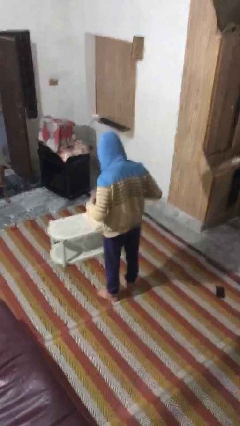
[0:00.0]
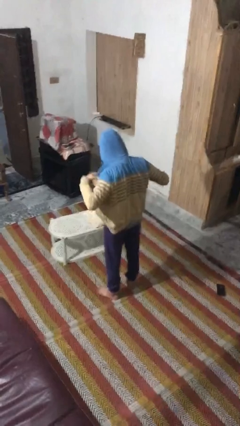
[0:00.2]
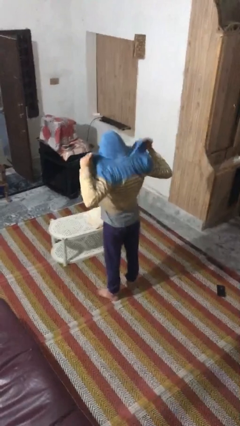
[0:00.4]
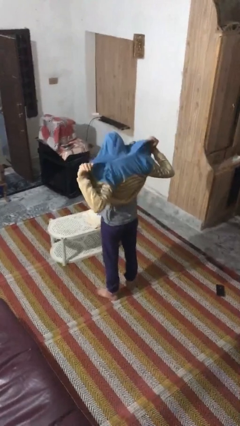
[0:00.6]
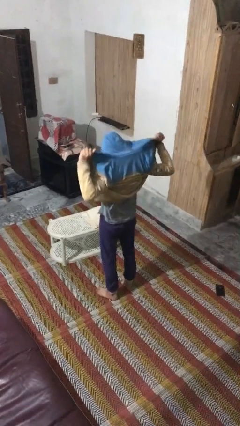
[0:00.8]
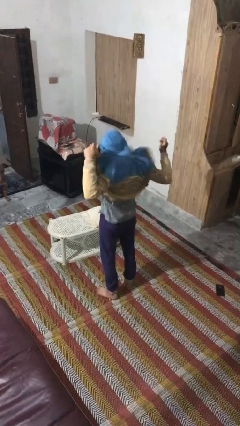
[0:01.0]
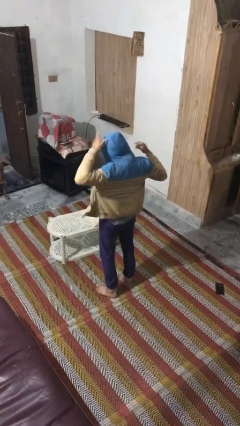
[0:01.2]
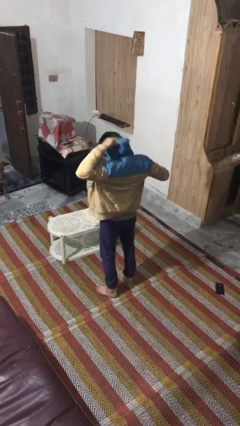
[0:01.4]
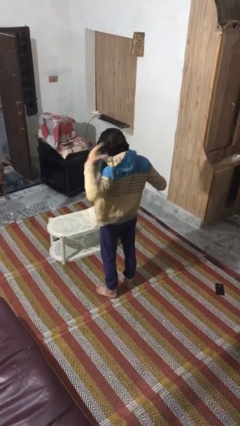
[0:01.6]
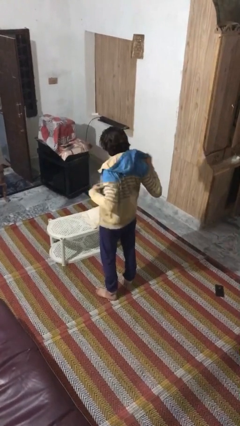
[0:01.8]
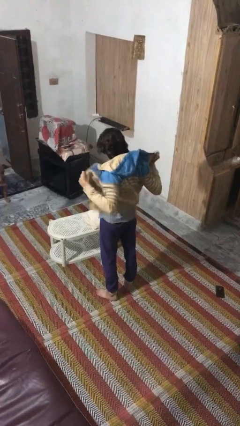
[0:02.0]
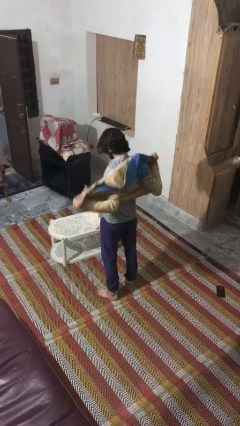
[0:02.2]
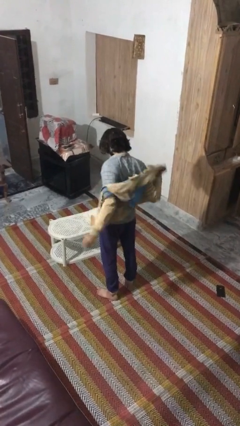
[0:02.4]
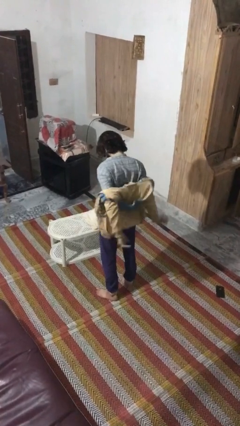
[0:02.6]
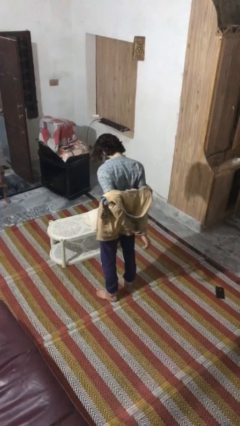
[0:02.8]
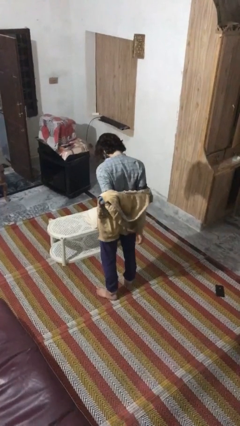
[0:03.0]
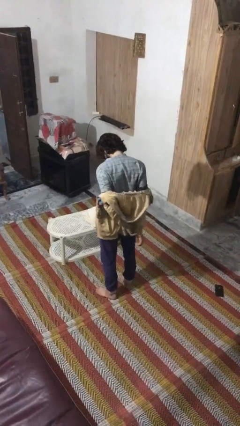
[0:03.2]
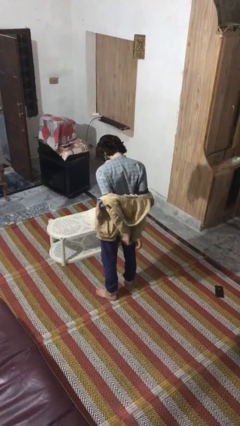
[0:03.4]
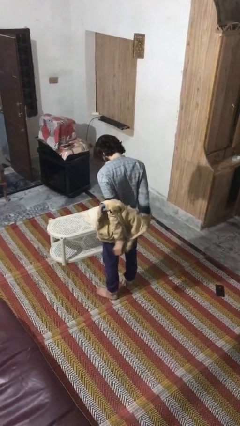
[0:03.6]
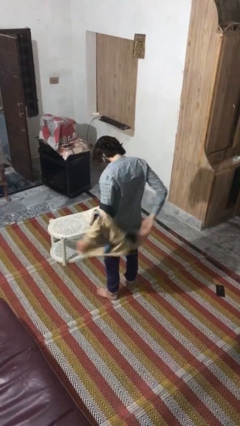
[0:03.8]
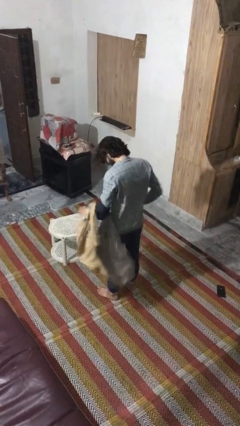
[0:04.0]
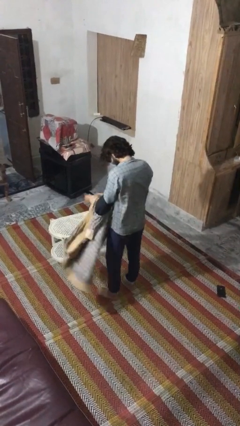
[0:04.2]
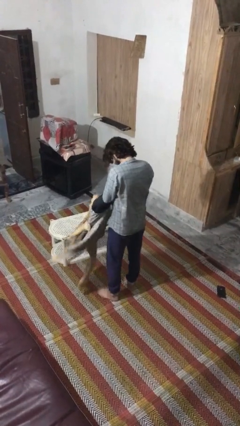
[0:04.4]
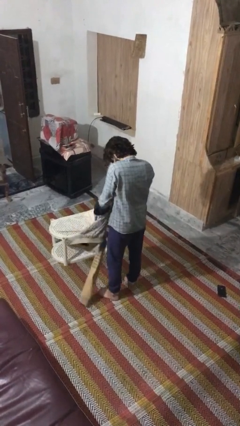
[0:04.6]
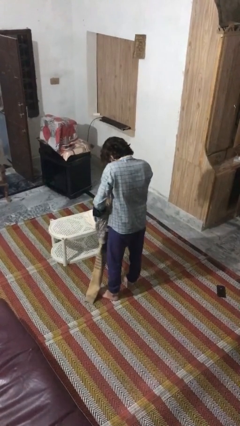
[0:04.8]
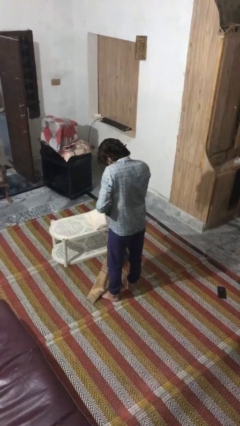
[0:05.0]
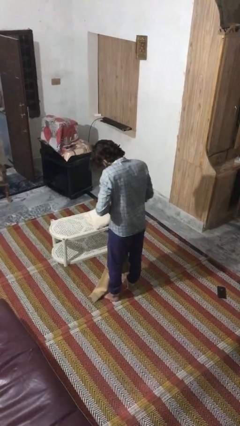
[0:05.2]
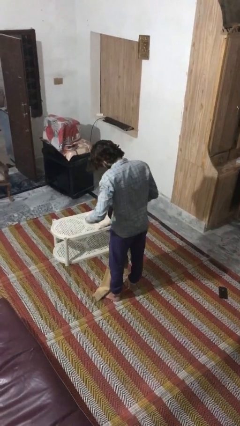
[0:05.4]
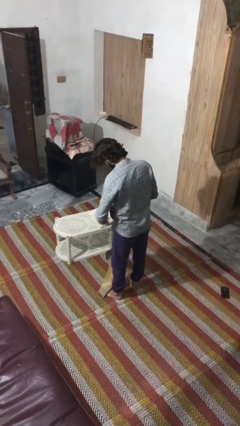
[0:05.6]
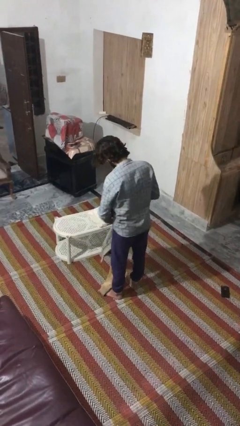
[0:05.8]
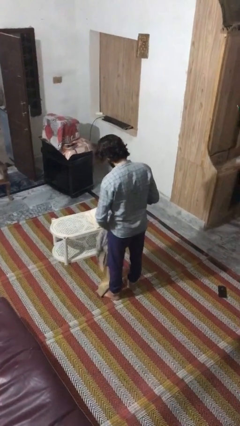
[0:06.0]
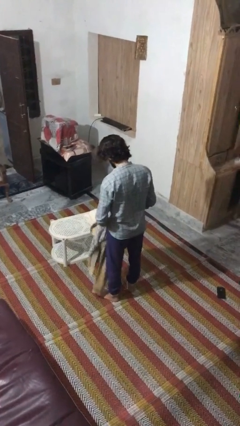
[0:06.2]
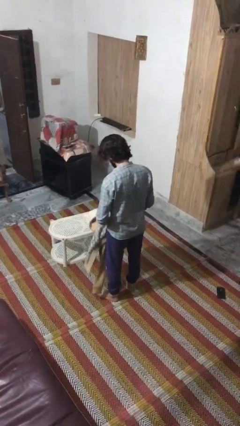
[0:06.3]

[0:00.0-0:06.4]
person takes off hoodie

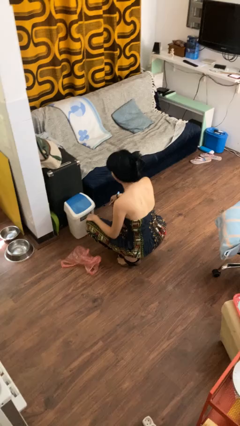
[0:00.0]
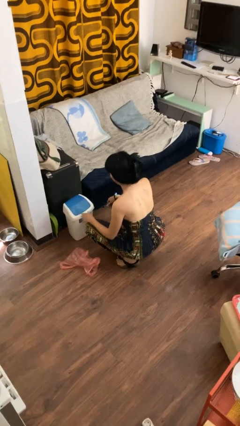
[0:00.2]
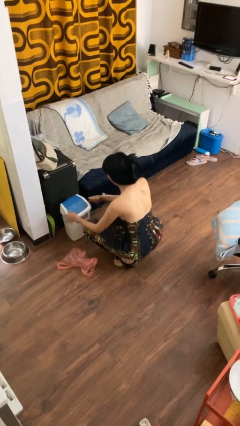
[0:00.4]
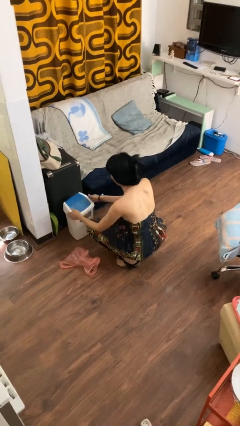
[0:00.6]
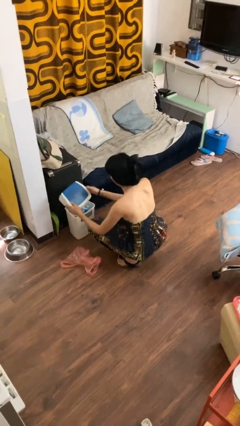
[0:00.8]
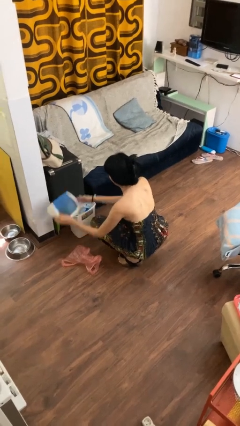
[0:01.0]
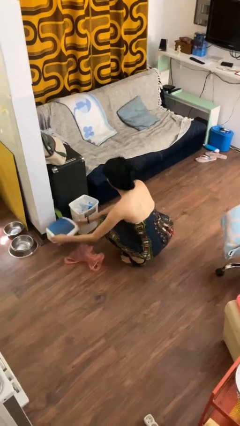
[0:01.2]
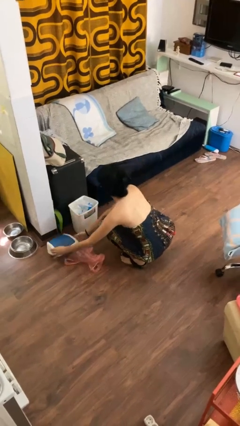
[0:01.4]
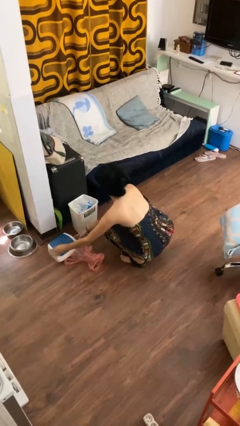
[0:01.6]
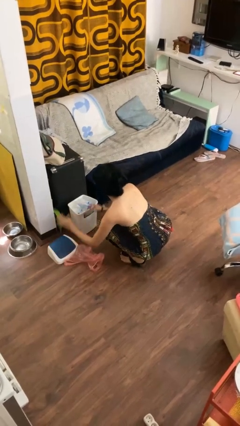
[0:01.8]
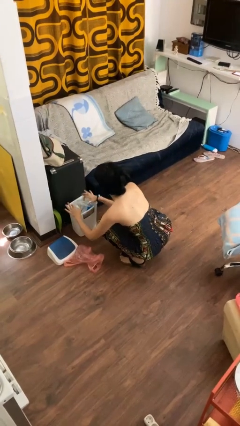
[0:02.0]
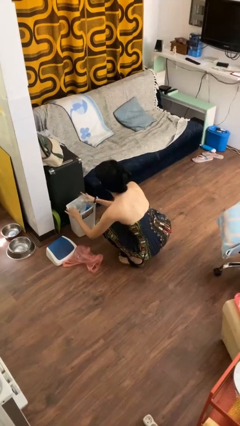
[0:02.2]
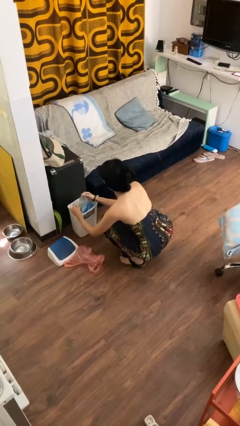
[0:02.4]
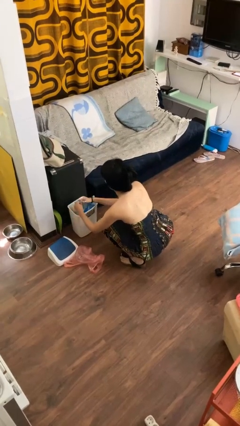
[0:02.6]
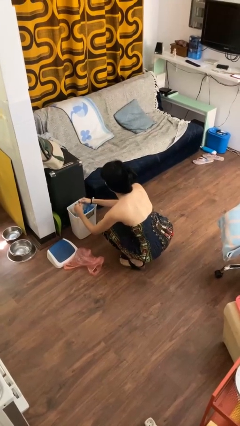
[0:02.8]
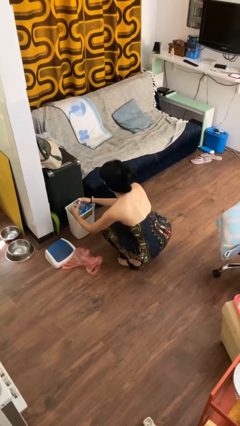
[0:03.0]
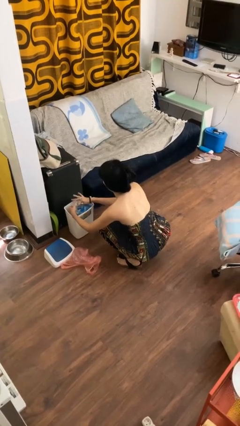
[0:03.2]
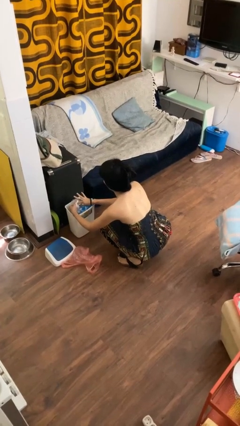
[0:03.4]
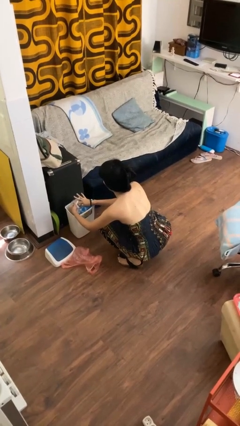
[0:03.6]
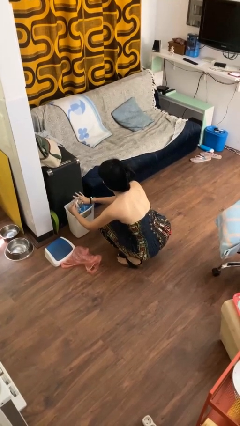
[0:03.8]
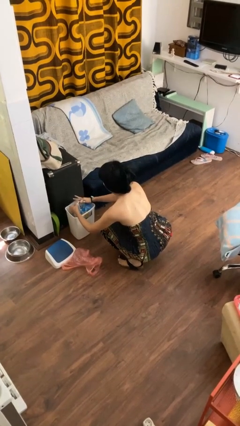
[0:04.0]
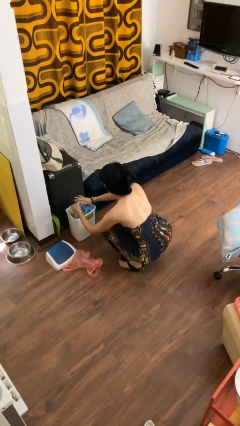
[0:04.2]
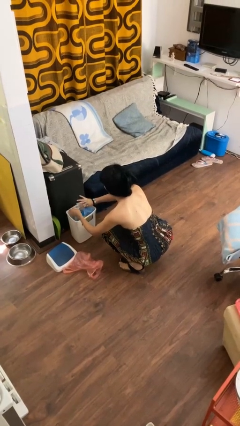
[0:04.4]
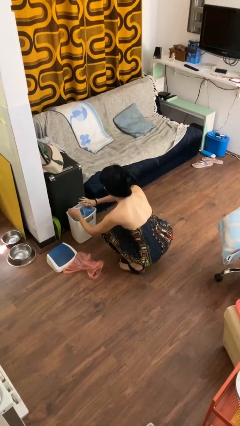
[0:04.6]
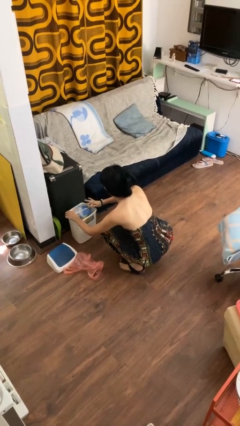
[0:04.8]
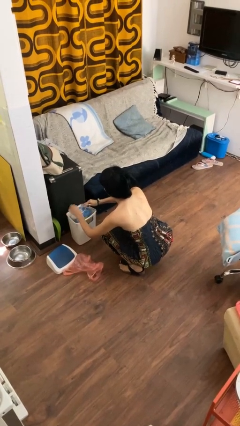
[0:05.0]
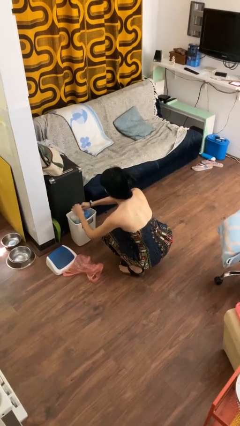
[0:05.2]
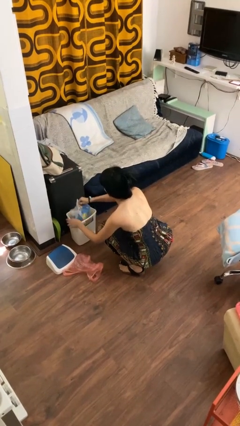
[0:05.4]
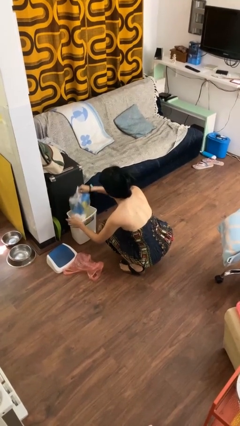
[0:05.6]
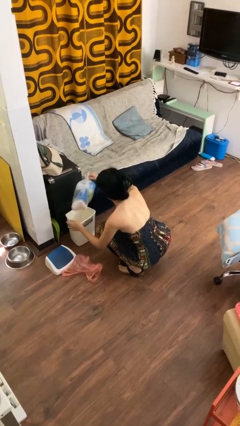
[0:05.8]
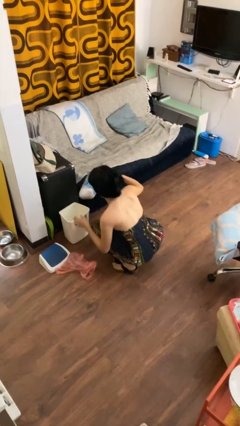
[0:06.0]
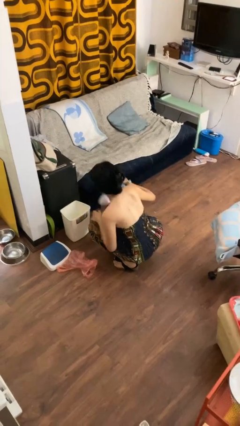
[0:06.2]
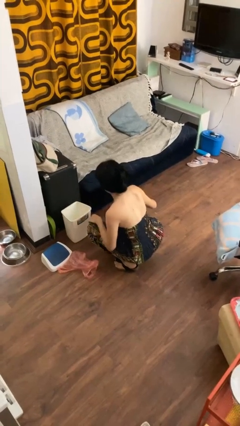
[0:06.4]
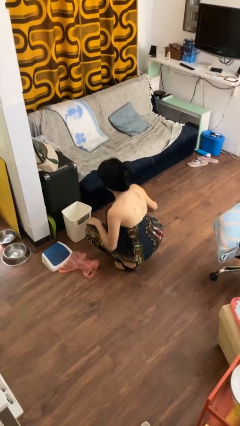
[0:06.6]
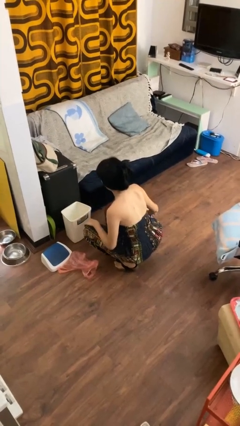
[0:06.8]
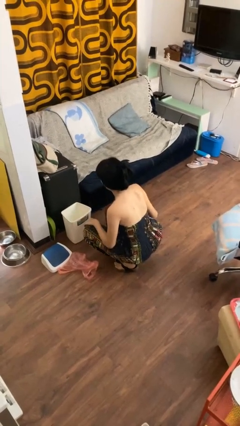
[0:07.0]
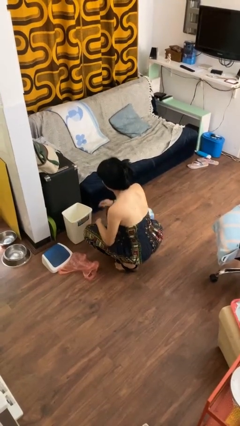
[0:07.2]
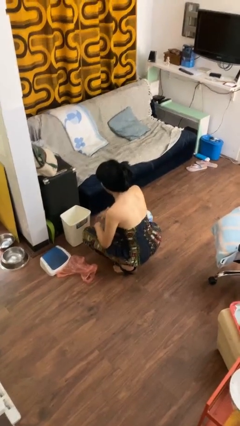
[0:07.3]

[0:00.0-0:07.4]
person removes trashbag from trashcan

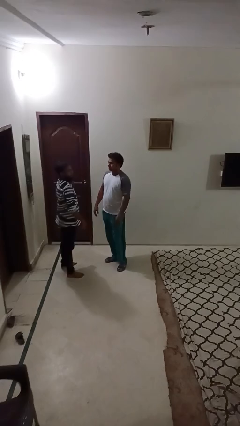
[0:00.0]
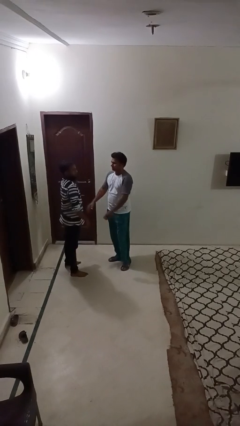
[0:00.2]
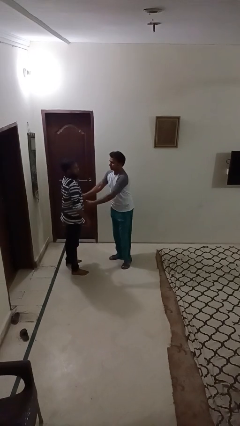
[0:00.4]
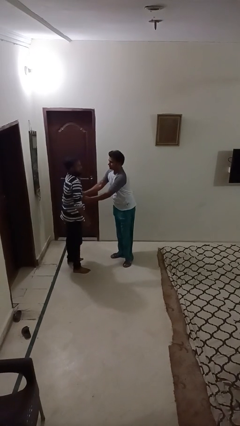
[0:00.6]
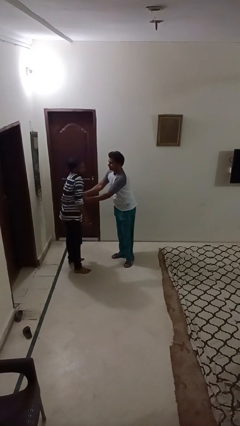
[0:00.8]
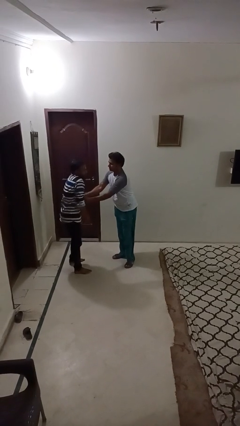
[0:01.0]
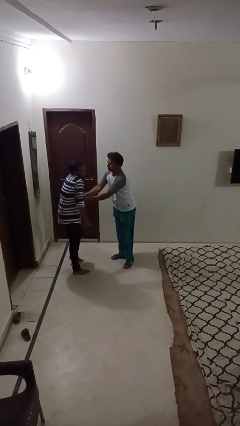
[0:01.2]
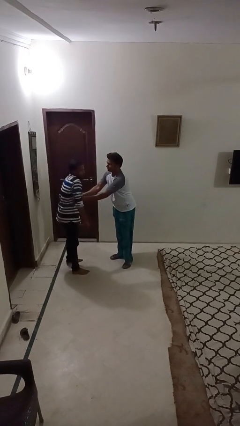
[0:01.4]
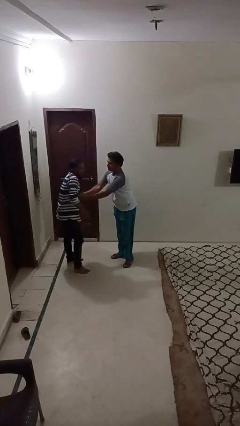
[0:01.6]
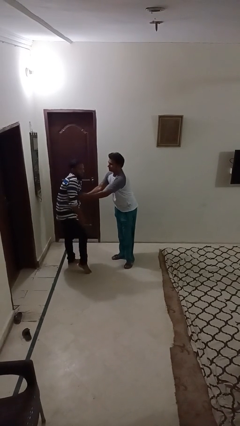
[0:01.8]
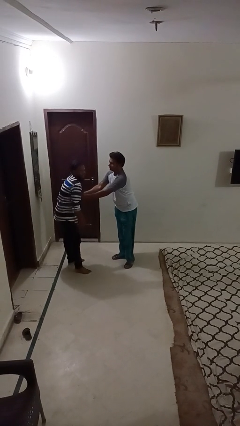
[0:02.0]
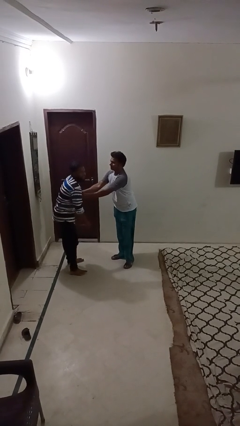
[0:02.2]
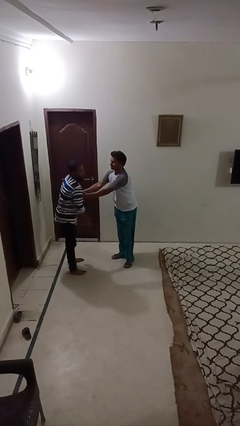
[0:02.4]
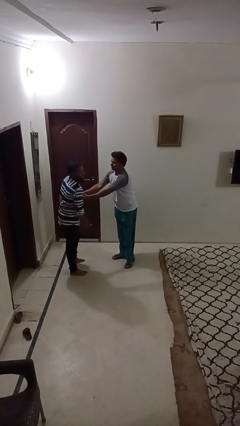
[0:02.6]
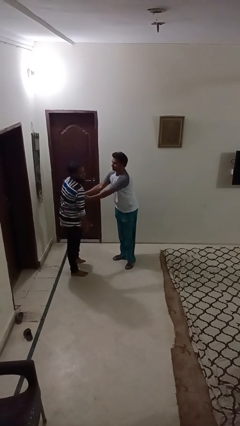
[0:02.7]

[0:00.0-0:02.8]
person tickles person

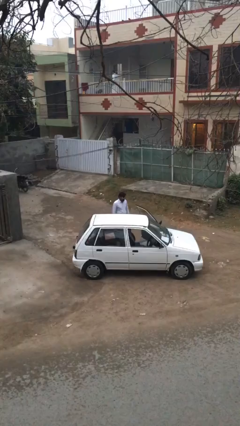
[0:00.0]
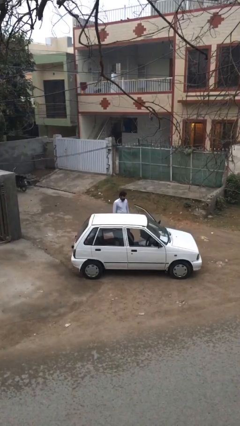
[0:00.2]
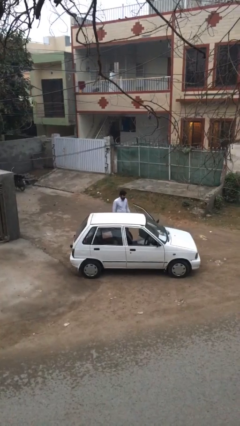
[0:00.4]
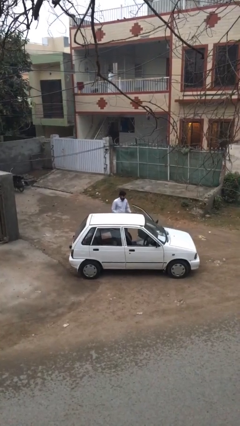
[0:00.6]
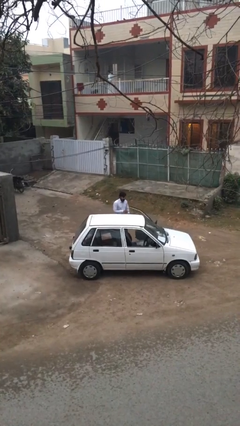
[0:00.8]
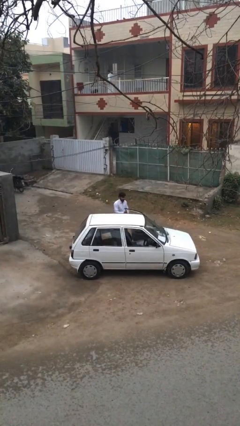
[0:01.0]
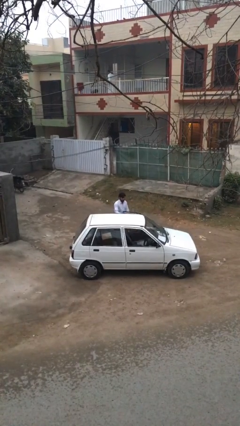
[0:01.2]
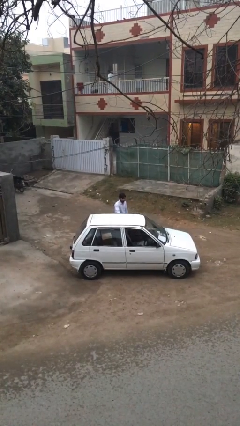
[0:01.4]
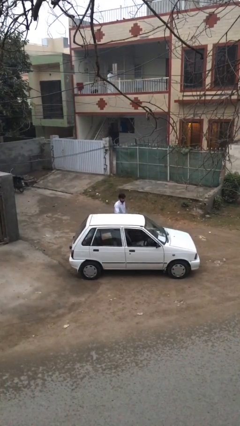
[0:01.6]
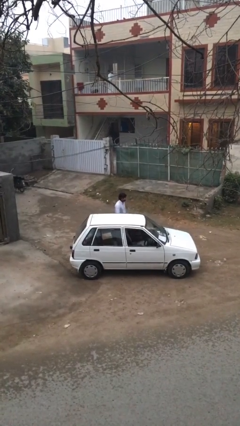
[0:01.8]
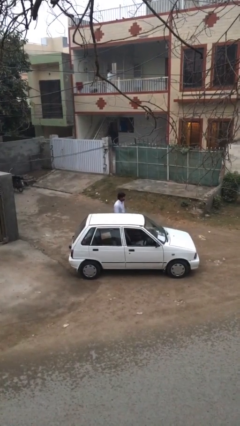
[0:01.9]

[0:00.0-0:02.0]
person closes car door
